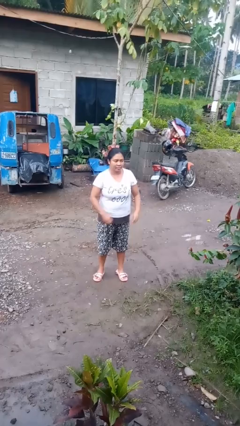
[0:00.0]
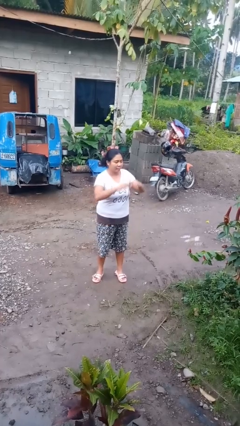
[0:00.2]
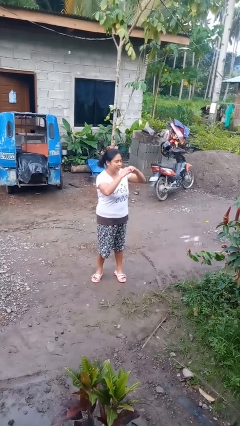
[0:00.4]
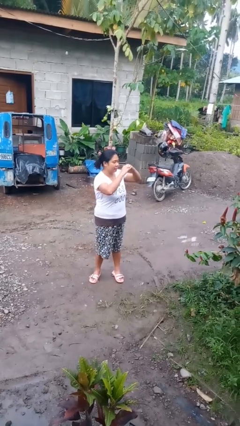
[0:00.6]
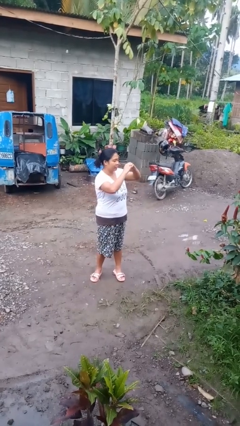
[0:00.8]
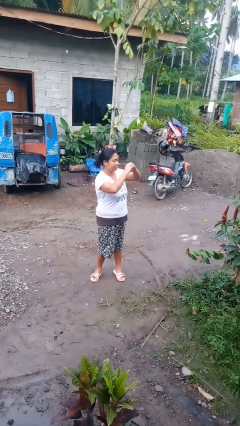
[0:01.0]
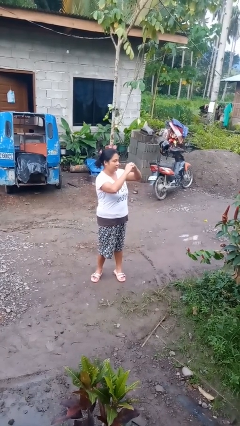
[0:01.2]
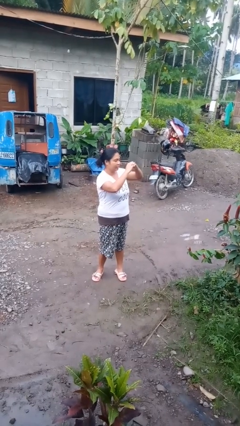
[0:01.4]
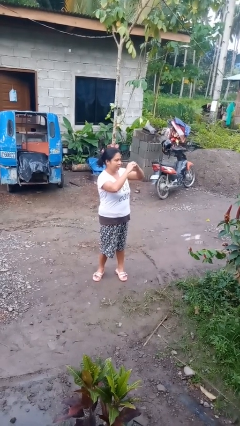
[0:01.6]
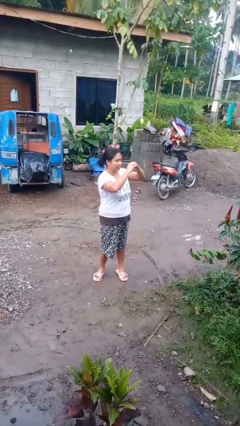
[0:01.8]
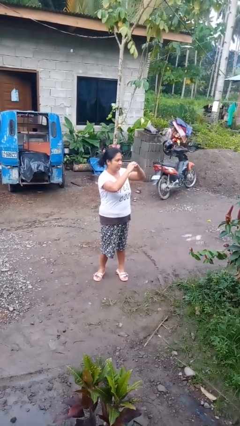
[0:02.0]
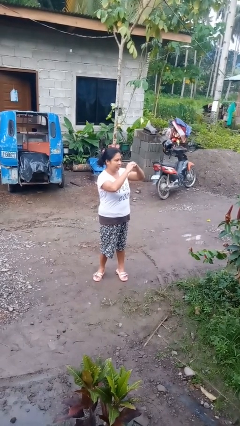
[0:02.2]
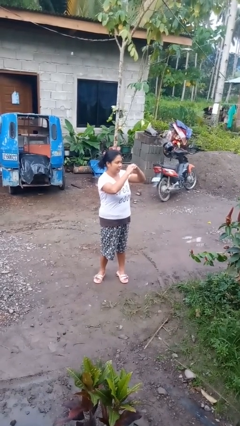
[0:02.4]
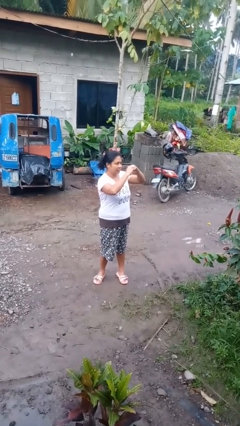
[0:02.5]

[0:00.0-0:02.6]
person gestures heart

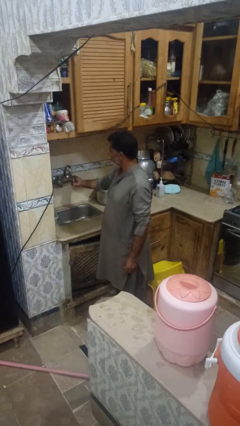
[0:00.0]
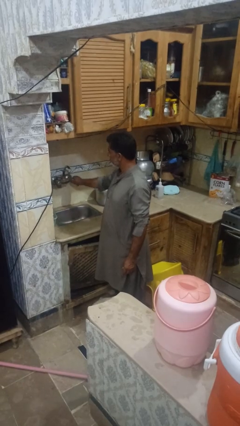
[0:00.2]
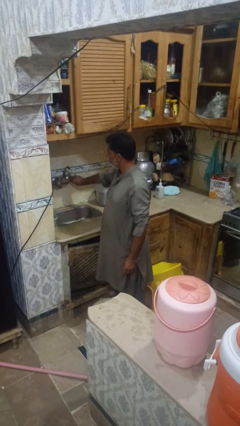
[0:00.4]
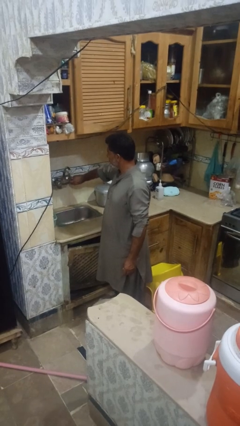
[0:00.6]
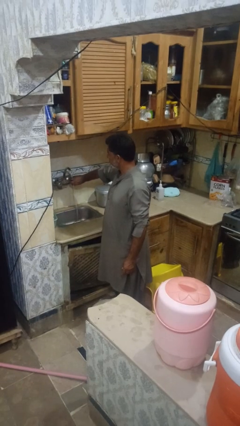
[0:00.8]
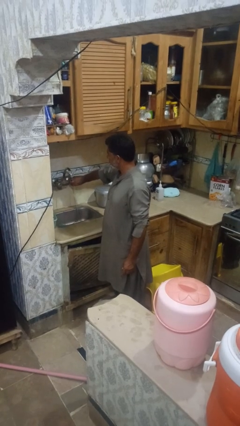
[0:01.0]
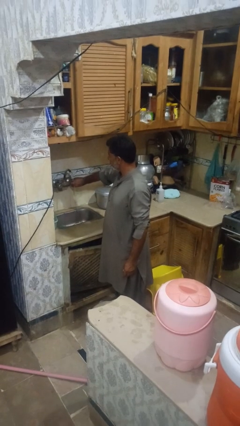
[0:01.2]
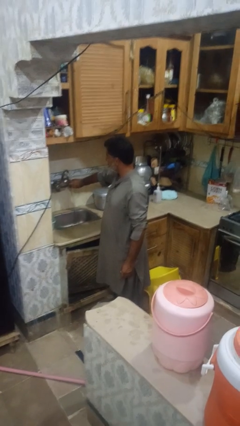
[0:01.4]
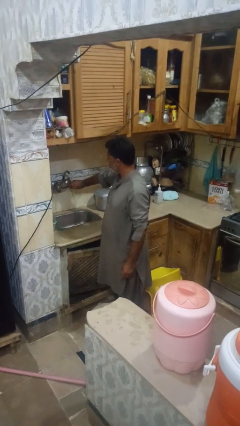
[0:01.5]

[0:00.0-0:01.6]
person turns on faucet

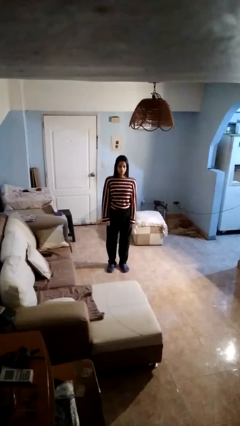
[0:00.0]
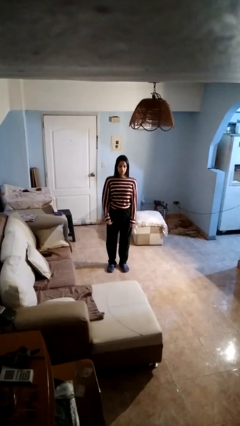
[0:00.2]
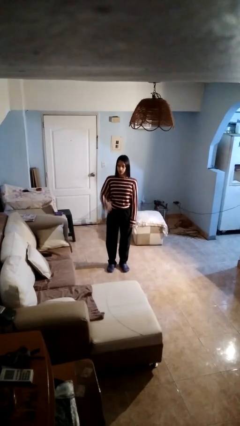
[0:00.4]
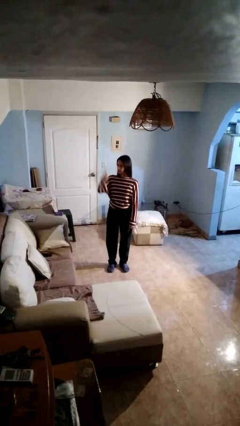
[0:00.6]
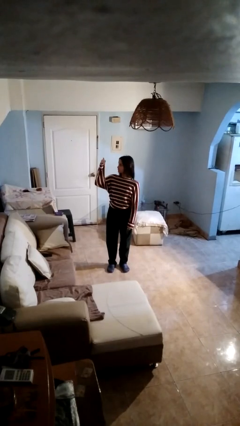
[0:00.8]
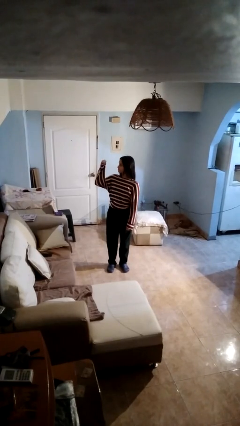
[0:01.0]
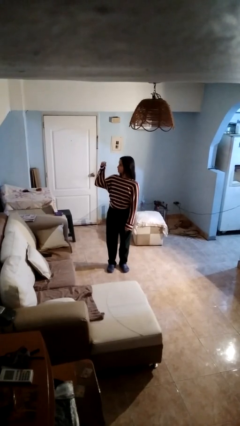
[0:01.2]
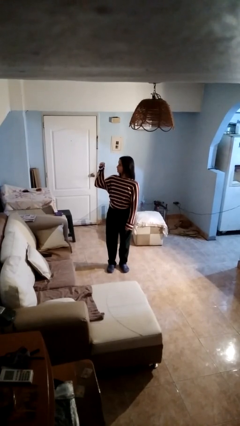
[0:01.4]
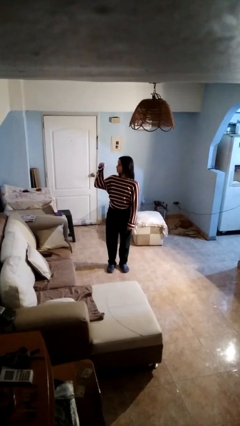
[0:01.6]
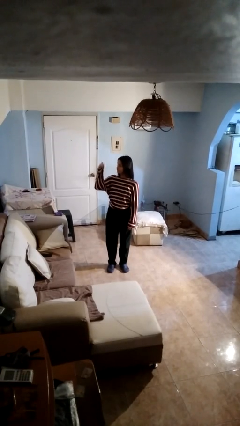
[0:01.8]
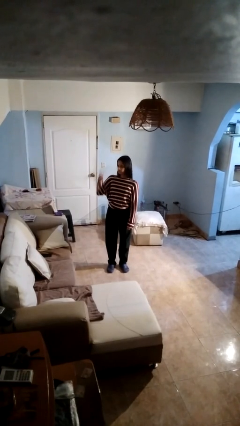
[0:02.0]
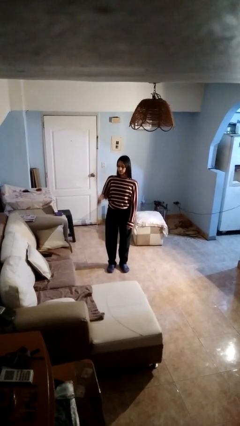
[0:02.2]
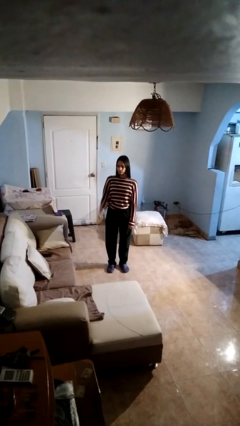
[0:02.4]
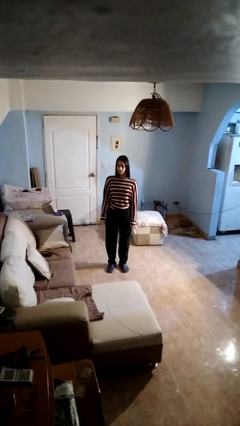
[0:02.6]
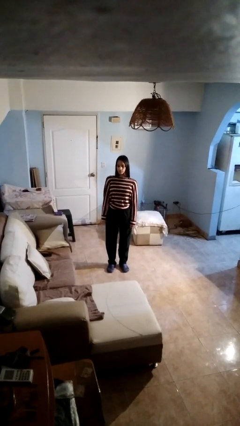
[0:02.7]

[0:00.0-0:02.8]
person gestures behind me

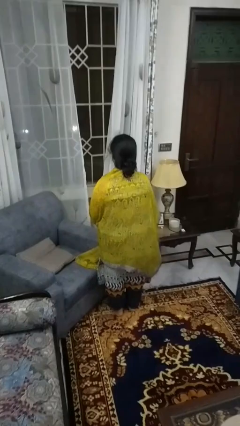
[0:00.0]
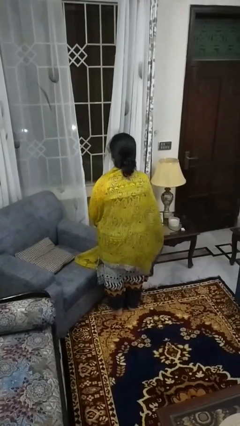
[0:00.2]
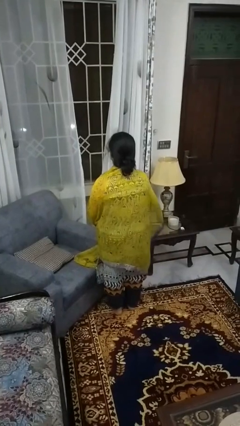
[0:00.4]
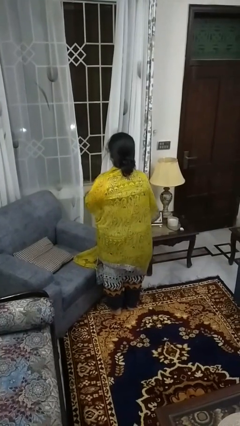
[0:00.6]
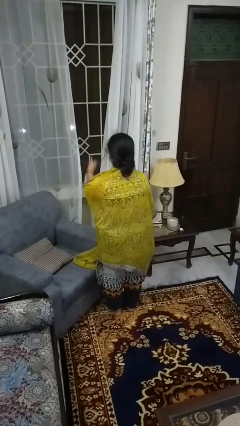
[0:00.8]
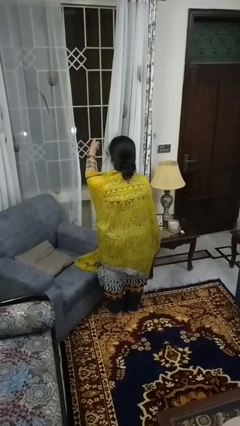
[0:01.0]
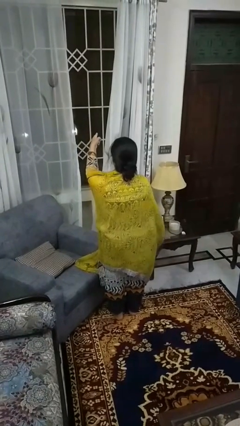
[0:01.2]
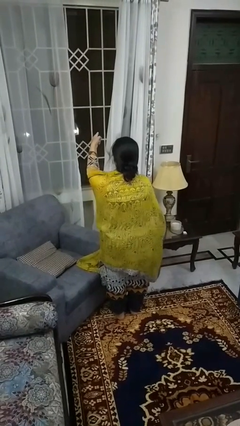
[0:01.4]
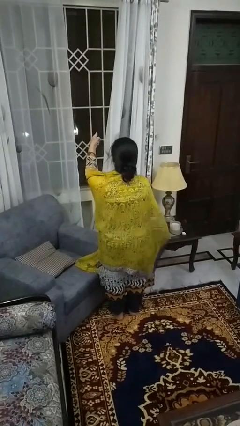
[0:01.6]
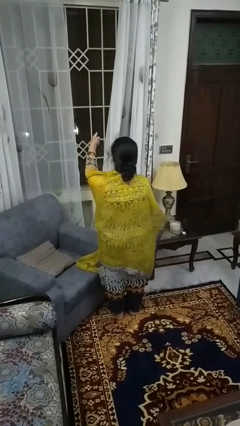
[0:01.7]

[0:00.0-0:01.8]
person points at person

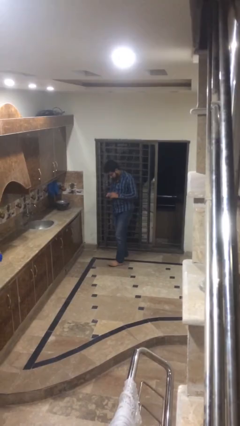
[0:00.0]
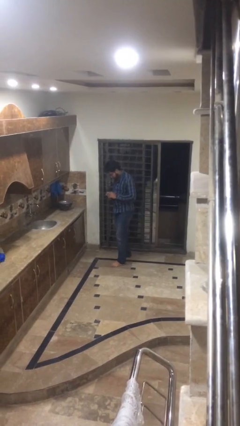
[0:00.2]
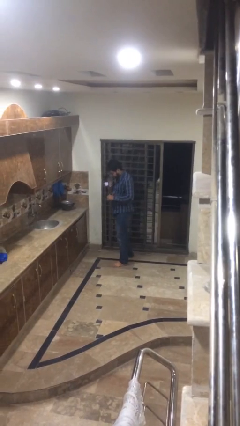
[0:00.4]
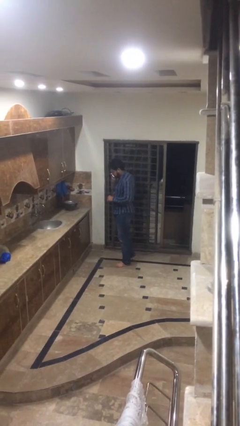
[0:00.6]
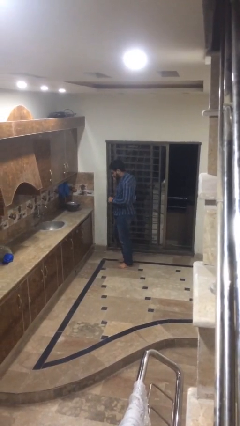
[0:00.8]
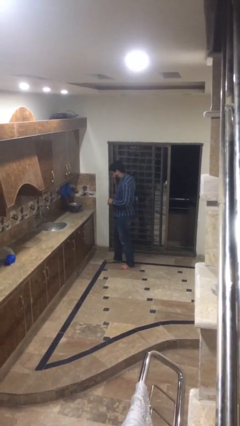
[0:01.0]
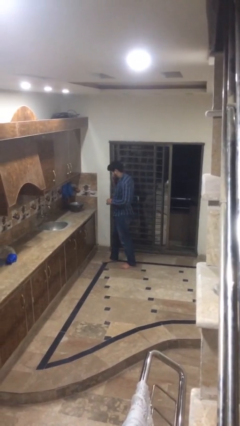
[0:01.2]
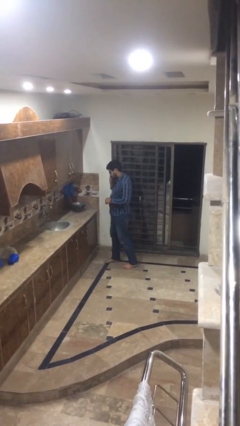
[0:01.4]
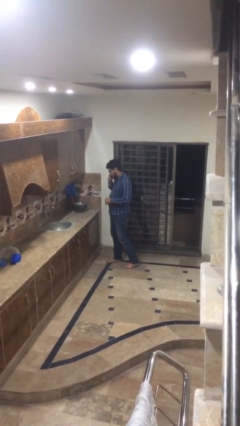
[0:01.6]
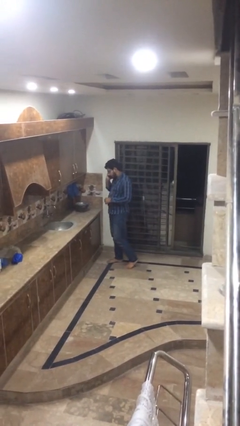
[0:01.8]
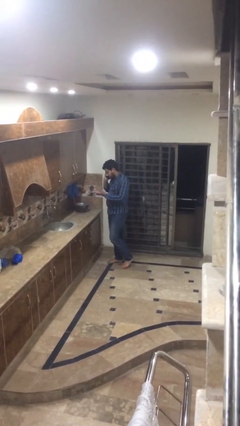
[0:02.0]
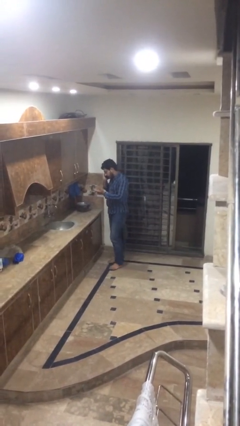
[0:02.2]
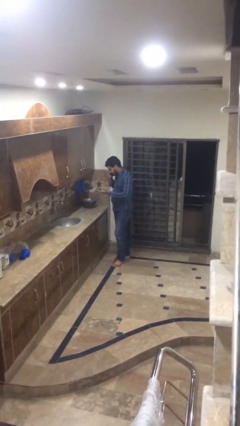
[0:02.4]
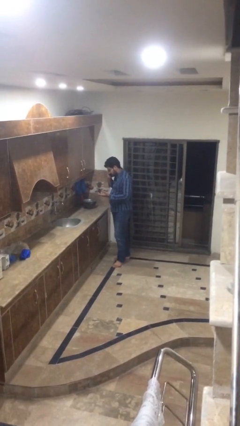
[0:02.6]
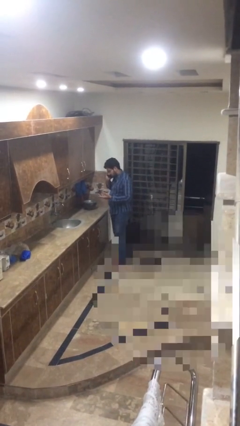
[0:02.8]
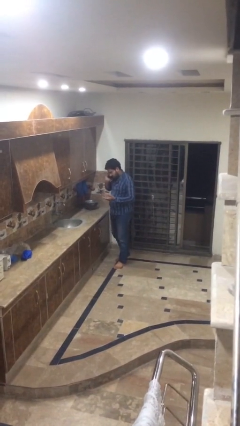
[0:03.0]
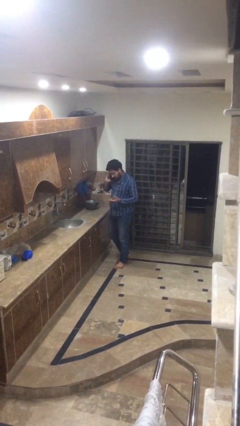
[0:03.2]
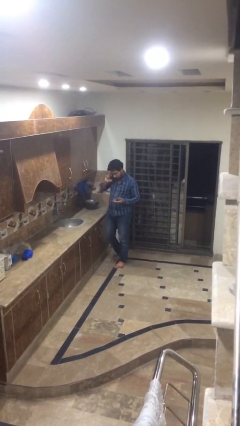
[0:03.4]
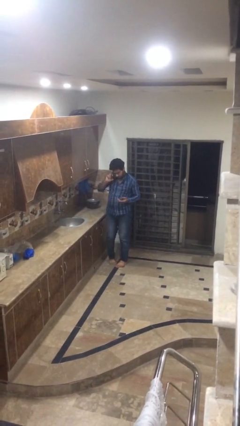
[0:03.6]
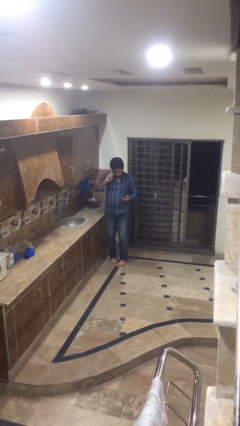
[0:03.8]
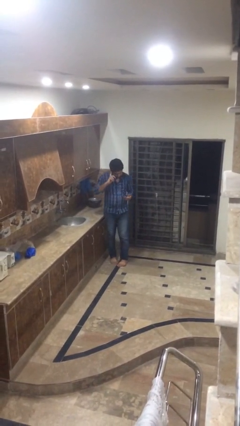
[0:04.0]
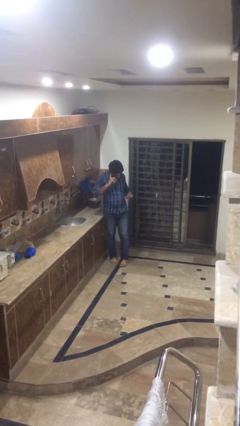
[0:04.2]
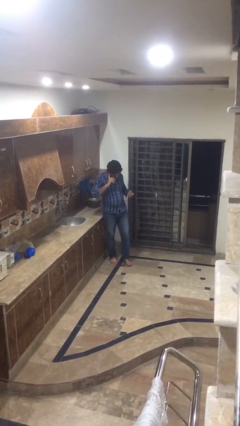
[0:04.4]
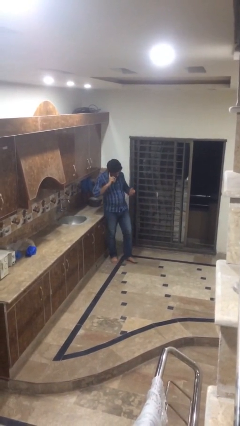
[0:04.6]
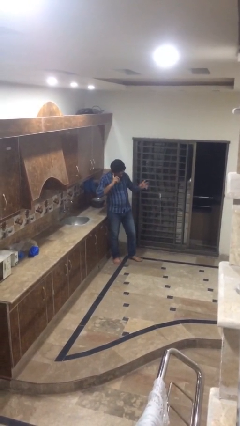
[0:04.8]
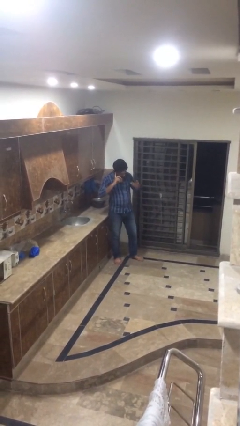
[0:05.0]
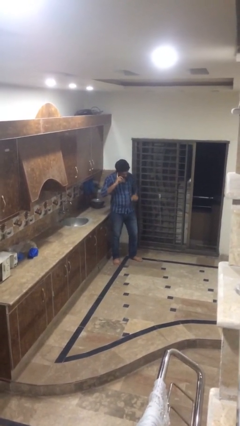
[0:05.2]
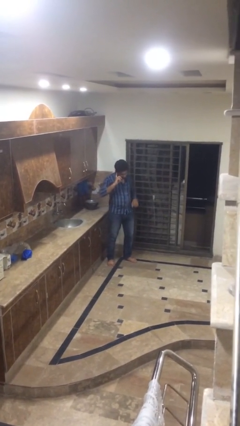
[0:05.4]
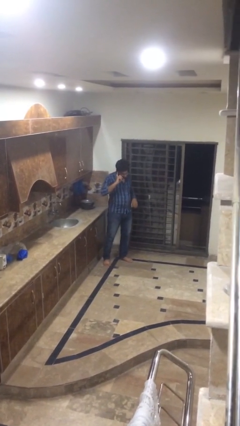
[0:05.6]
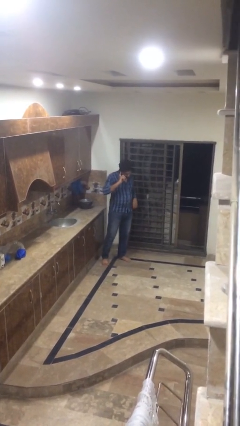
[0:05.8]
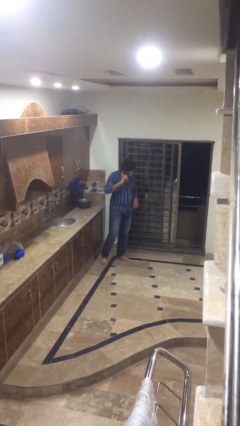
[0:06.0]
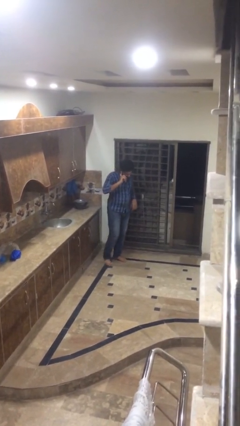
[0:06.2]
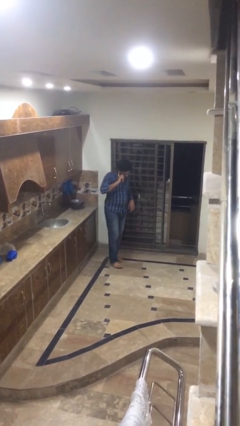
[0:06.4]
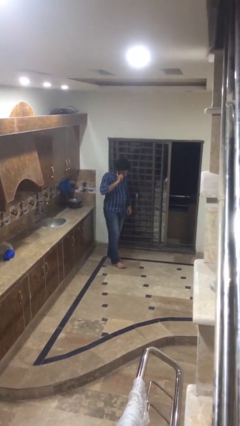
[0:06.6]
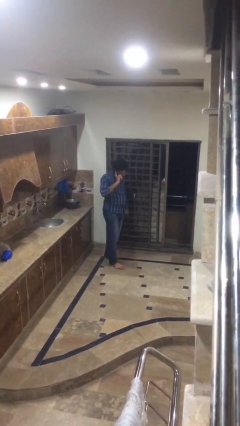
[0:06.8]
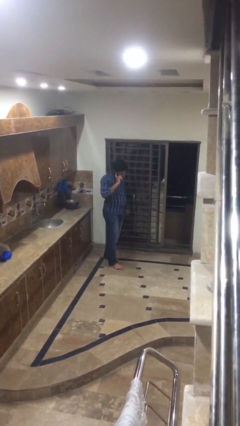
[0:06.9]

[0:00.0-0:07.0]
person talks on phone

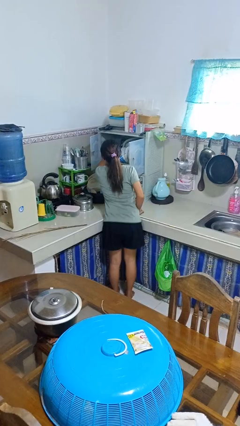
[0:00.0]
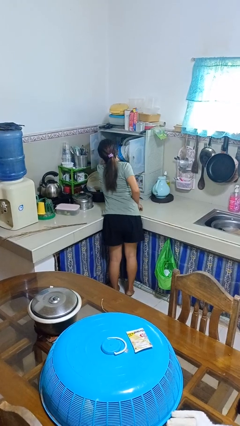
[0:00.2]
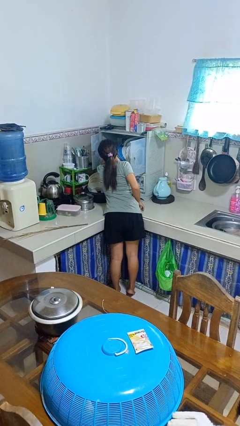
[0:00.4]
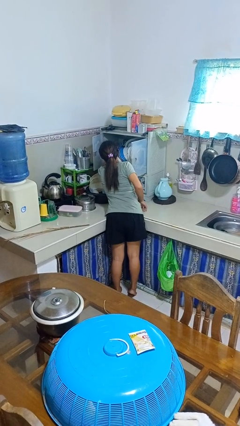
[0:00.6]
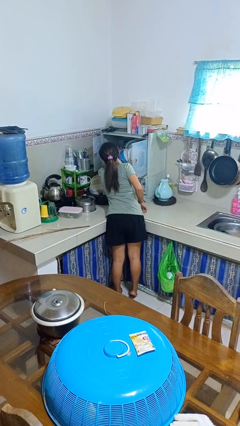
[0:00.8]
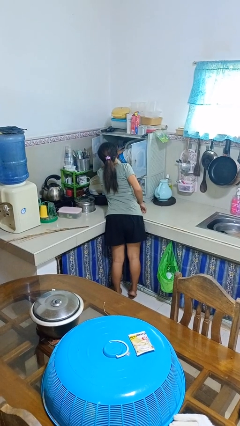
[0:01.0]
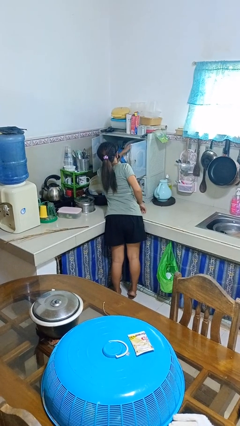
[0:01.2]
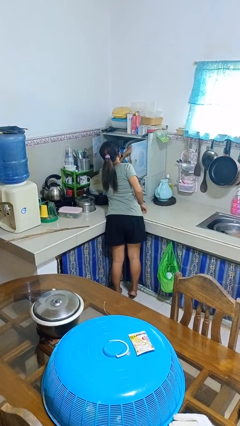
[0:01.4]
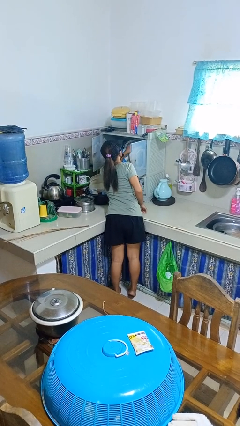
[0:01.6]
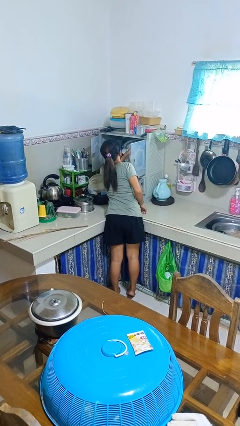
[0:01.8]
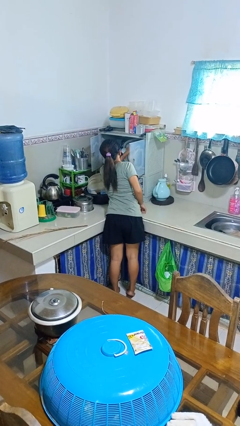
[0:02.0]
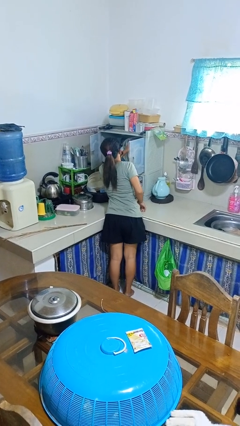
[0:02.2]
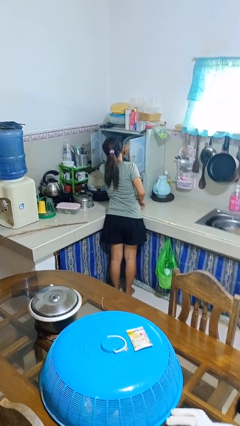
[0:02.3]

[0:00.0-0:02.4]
person searches in kitchen drawer
